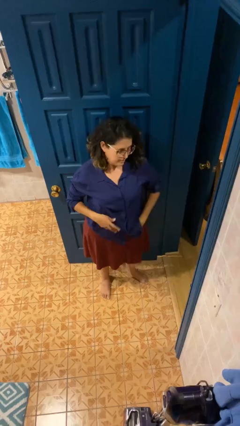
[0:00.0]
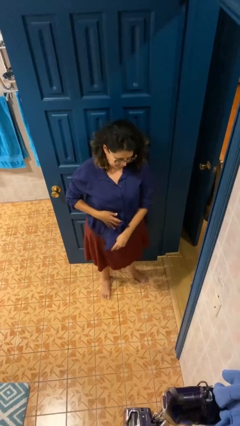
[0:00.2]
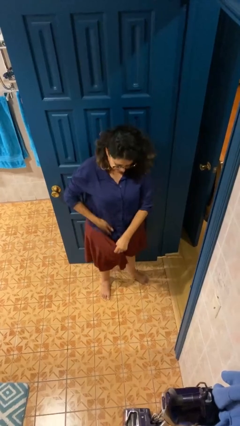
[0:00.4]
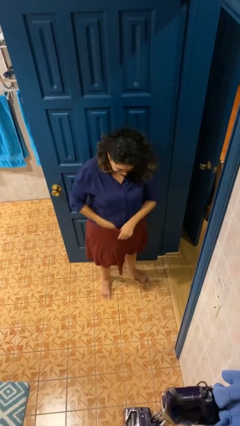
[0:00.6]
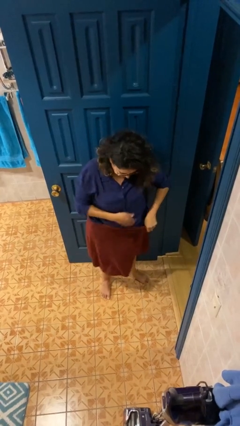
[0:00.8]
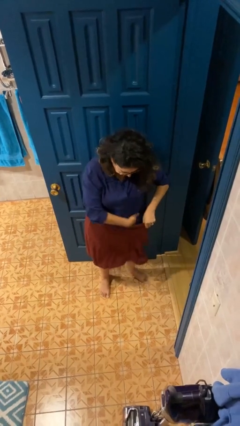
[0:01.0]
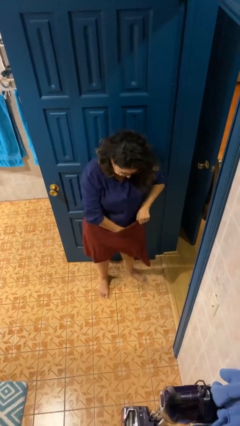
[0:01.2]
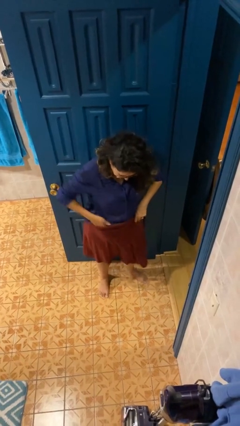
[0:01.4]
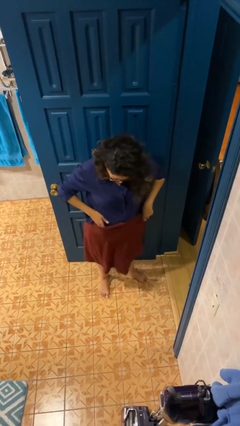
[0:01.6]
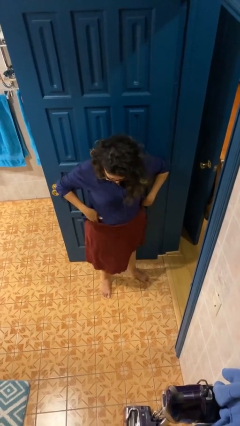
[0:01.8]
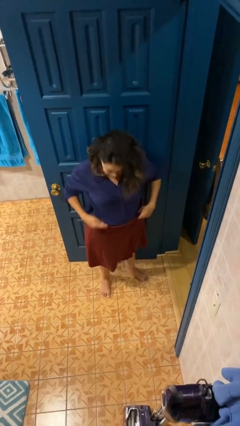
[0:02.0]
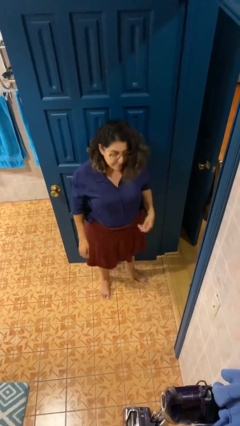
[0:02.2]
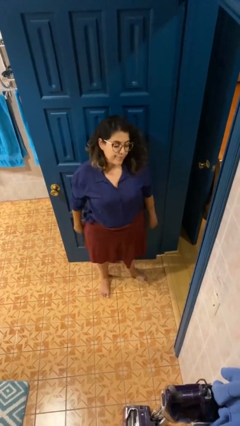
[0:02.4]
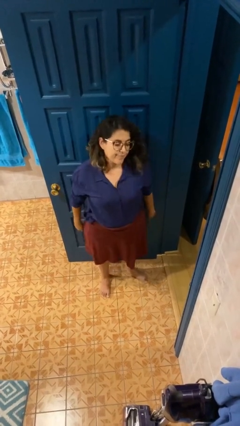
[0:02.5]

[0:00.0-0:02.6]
person tucks in shirt

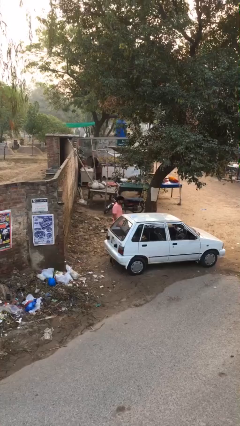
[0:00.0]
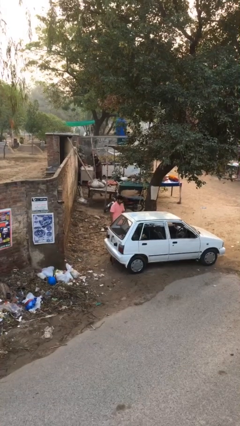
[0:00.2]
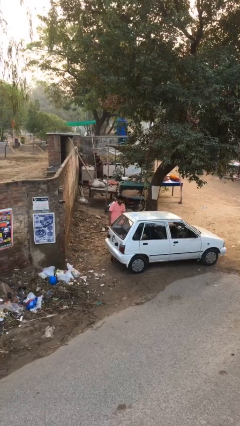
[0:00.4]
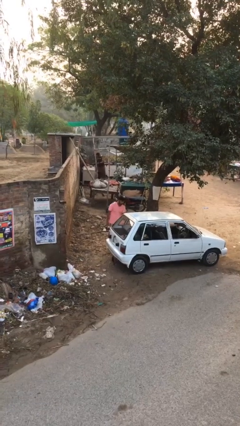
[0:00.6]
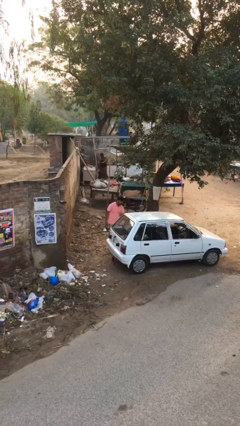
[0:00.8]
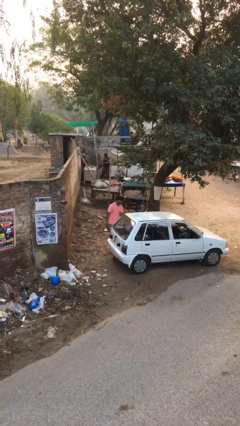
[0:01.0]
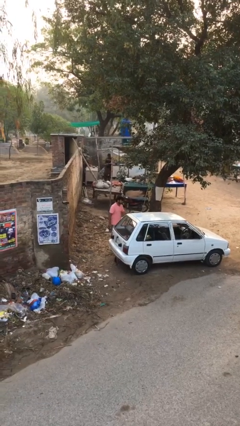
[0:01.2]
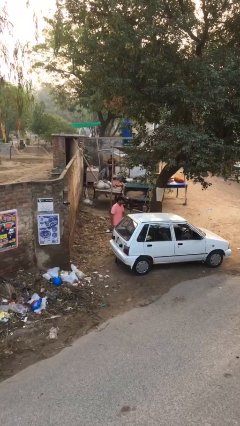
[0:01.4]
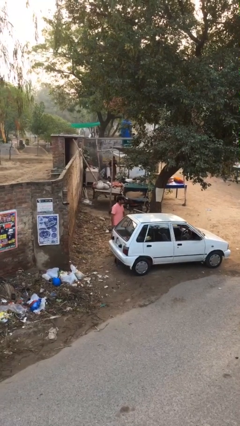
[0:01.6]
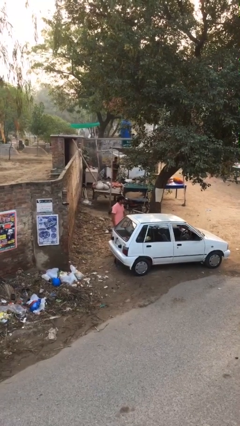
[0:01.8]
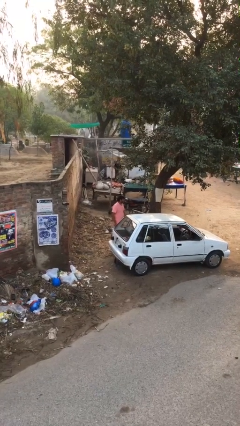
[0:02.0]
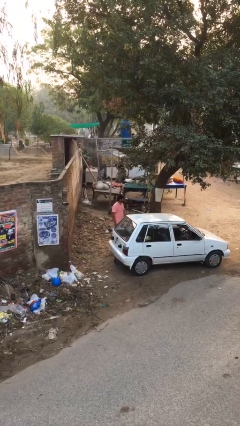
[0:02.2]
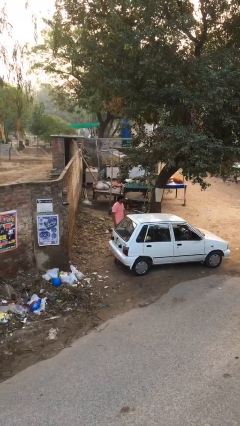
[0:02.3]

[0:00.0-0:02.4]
person opens car door

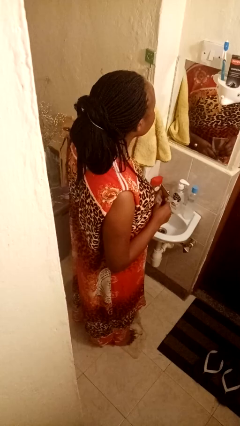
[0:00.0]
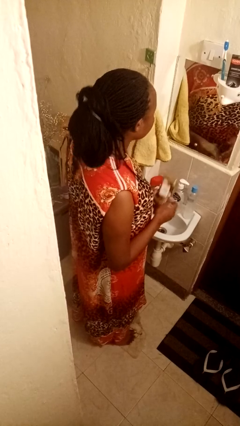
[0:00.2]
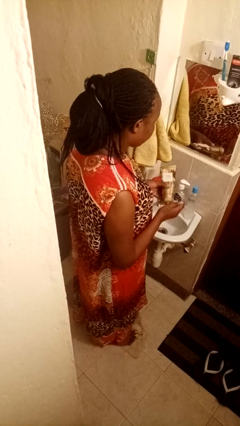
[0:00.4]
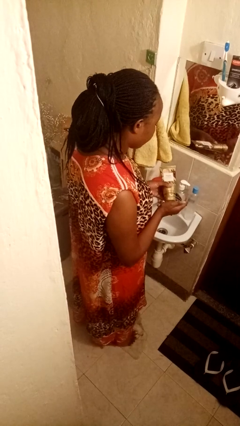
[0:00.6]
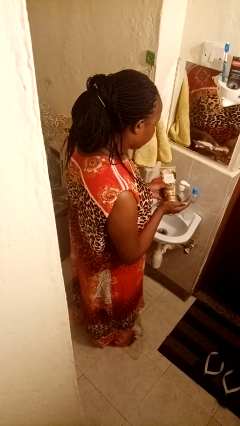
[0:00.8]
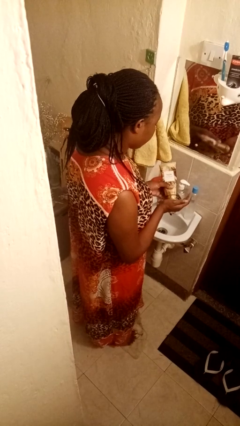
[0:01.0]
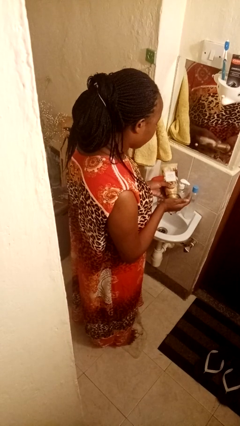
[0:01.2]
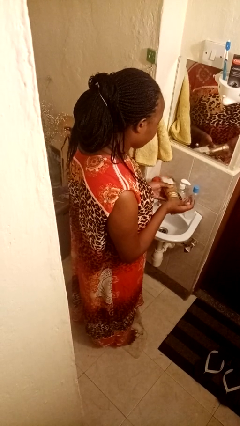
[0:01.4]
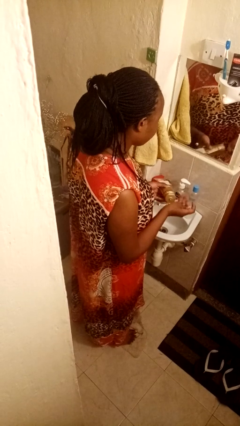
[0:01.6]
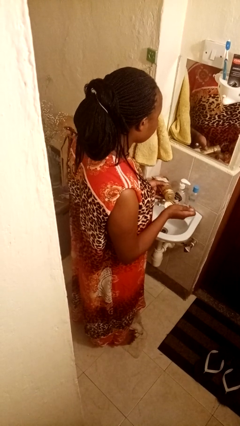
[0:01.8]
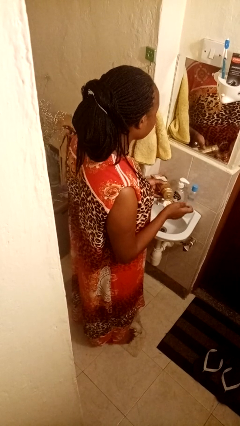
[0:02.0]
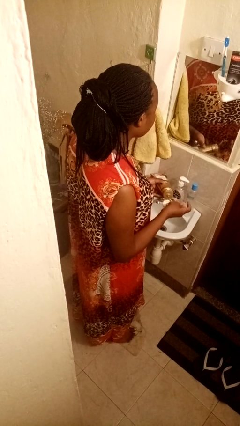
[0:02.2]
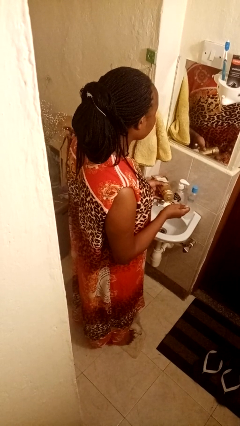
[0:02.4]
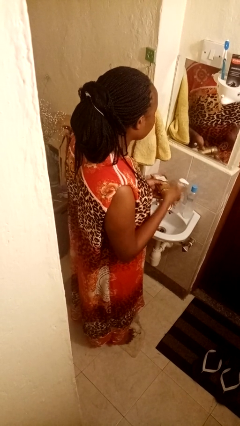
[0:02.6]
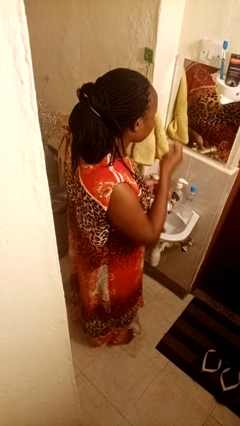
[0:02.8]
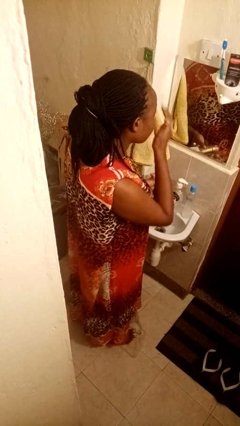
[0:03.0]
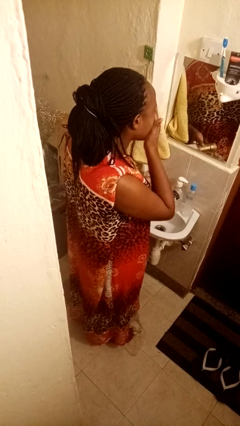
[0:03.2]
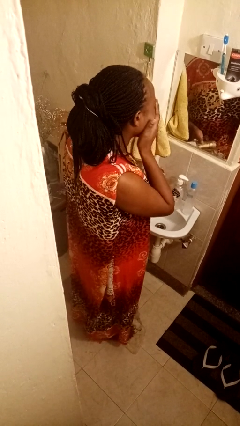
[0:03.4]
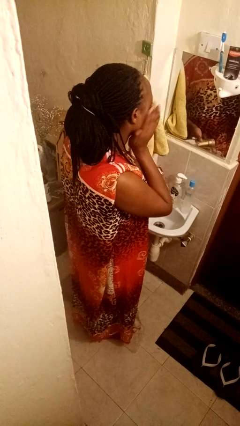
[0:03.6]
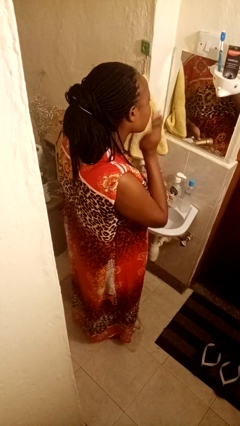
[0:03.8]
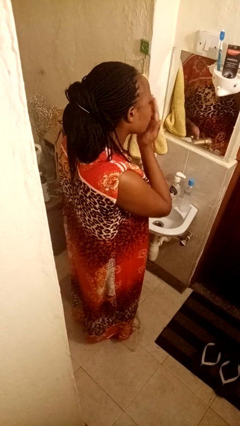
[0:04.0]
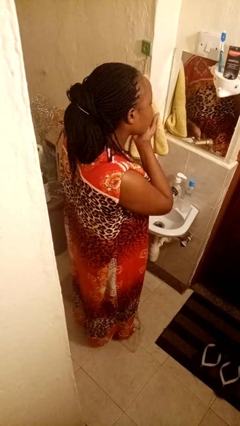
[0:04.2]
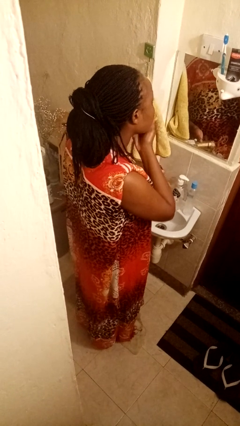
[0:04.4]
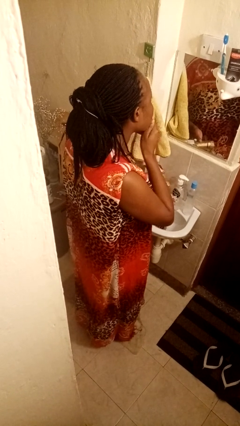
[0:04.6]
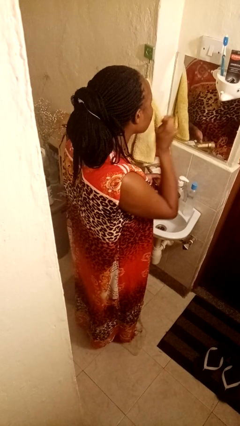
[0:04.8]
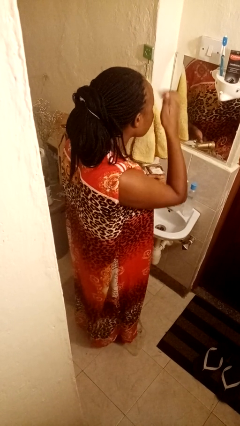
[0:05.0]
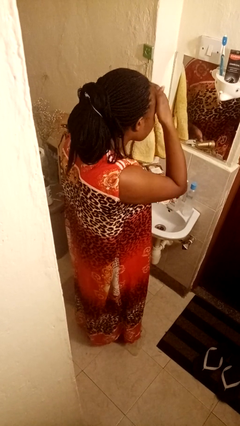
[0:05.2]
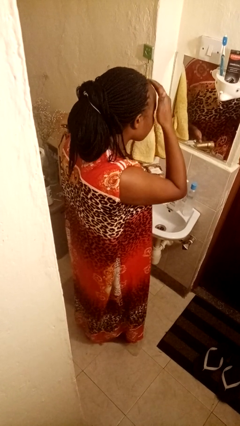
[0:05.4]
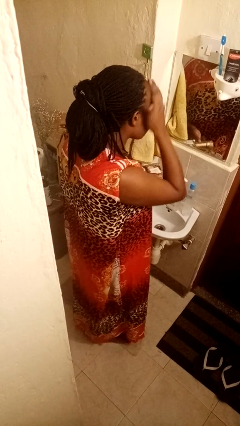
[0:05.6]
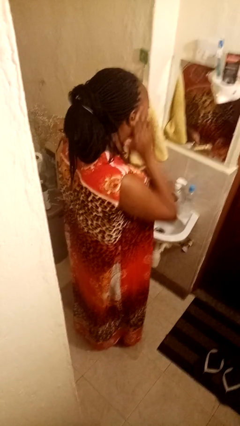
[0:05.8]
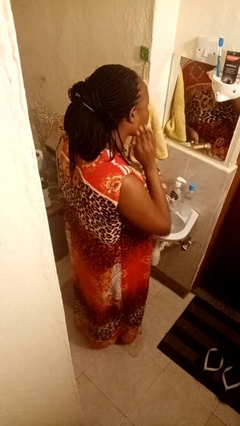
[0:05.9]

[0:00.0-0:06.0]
person applies facial moisturizer

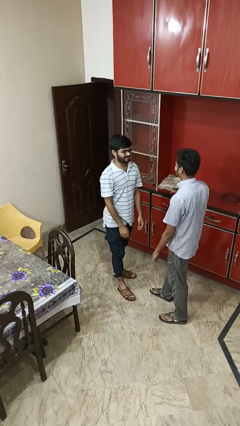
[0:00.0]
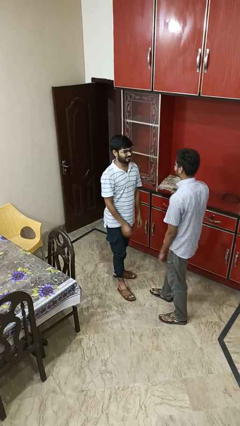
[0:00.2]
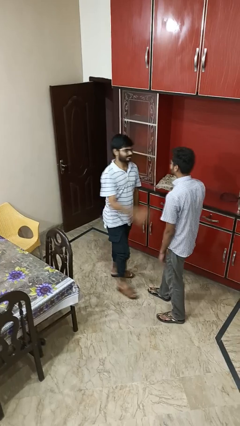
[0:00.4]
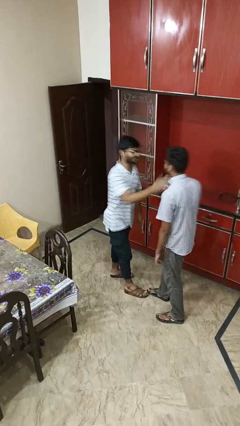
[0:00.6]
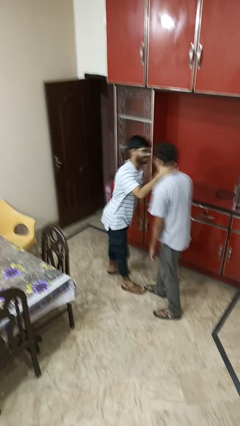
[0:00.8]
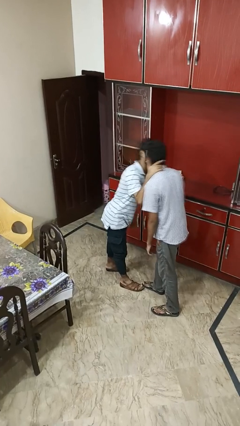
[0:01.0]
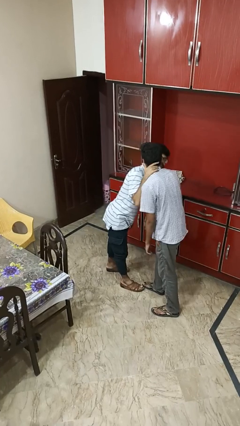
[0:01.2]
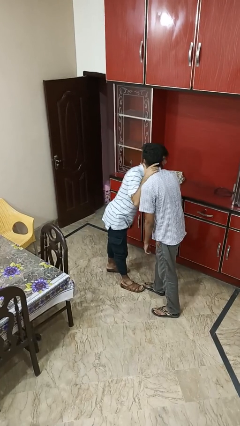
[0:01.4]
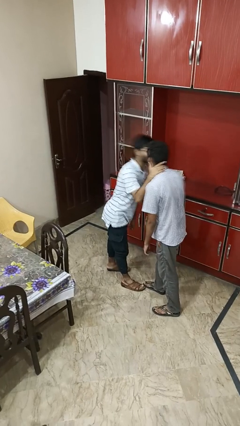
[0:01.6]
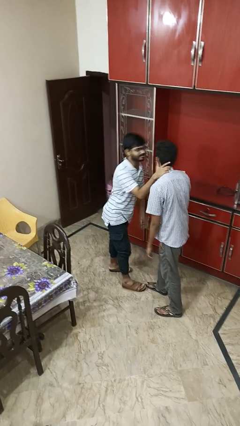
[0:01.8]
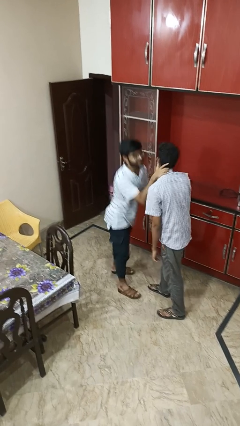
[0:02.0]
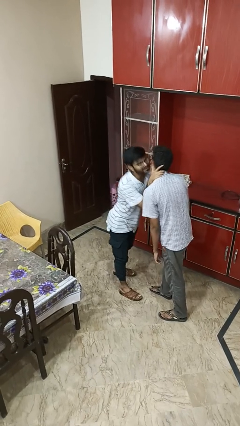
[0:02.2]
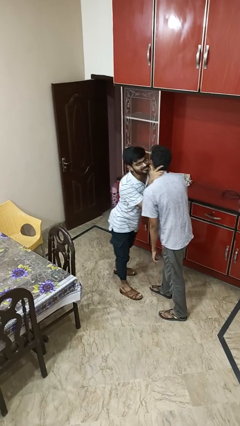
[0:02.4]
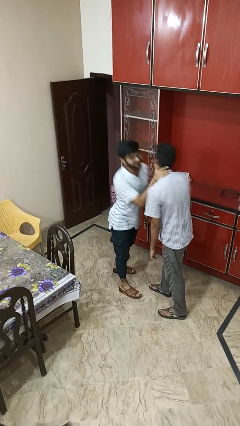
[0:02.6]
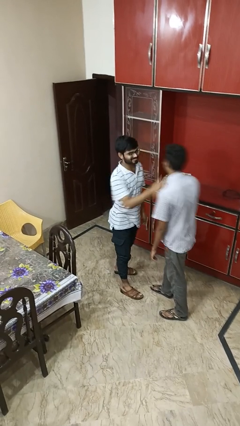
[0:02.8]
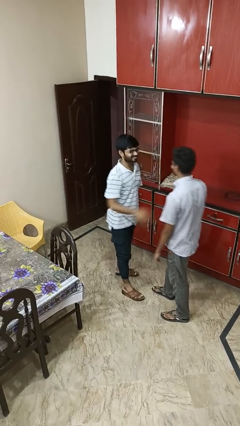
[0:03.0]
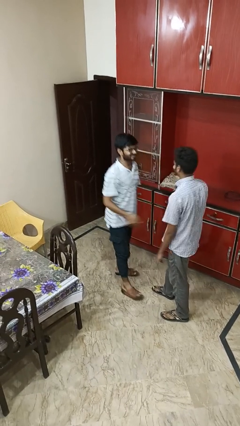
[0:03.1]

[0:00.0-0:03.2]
person kisses cheek of person

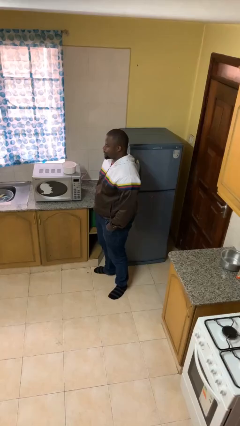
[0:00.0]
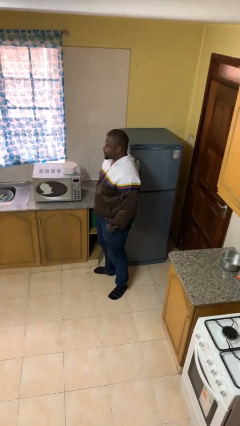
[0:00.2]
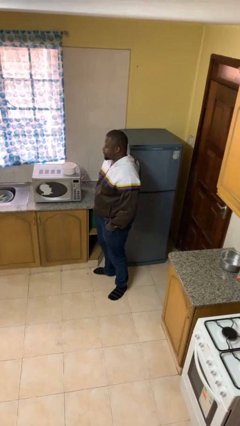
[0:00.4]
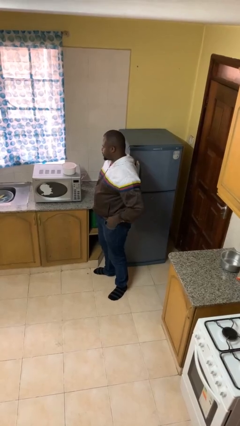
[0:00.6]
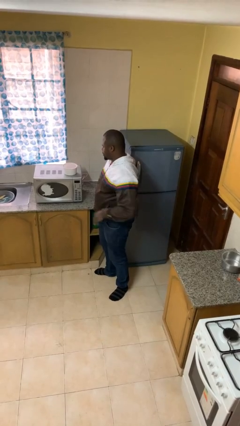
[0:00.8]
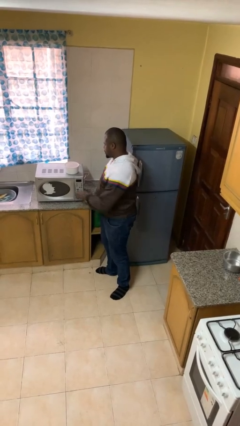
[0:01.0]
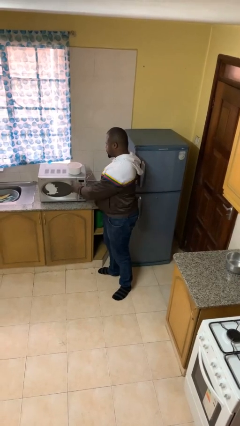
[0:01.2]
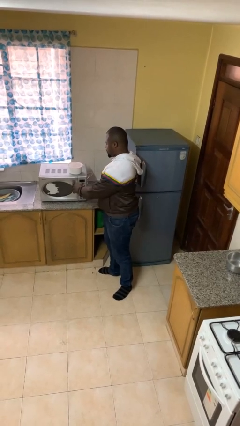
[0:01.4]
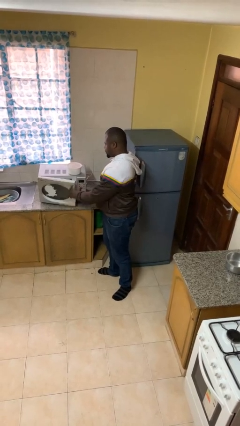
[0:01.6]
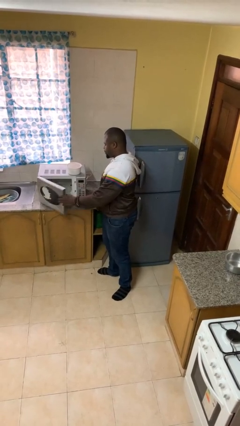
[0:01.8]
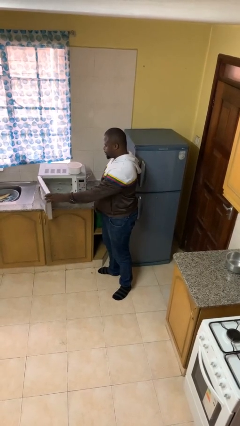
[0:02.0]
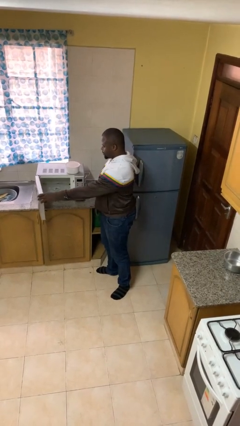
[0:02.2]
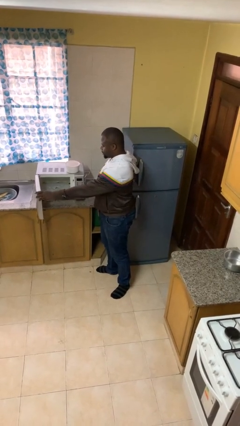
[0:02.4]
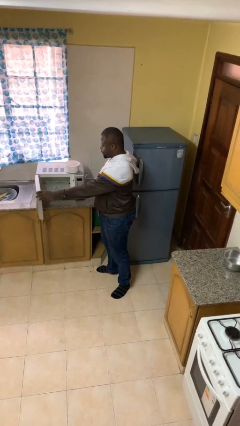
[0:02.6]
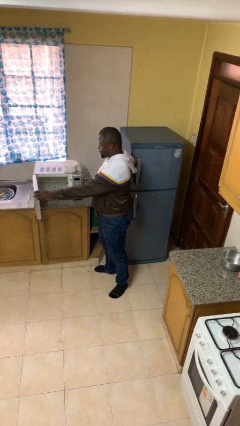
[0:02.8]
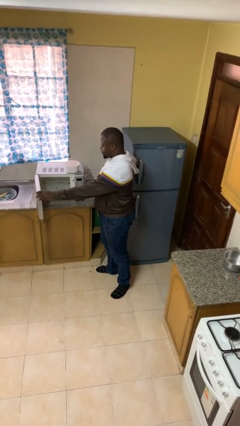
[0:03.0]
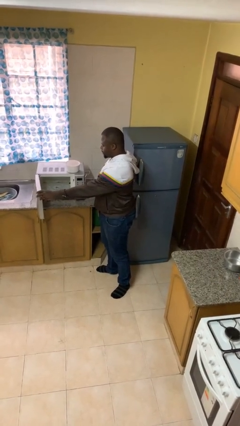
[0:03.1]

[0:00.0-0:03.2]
person opens microwave
